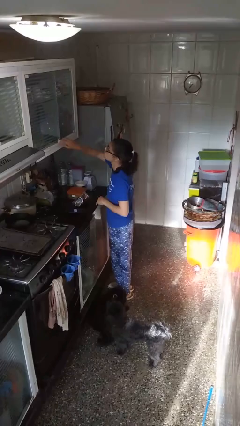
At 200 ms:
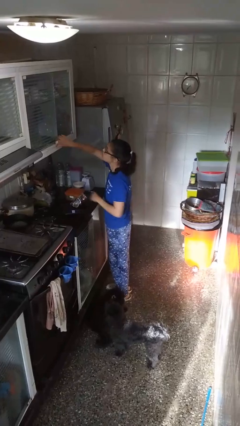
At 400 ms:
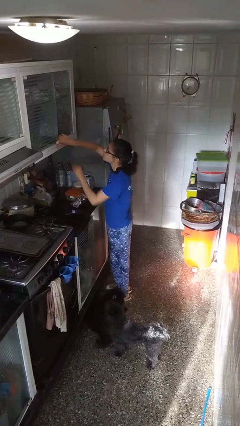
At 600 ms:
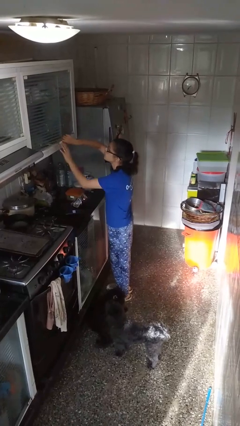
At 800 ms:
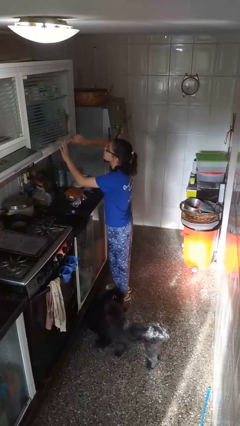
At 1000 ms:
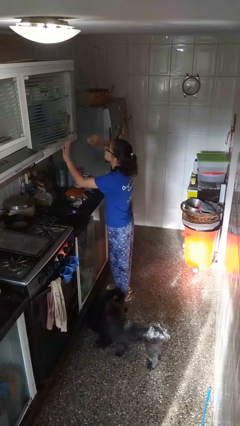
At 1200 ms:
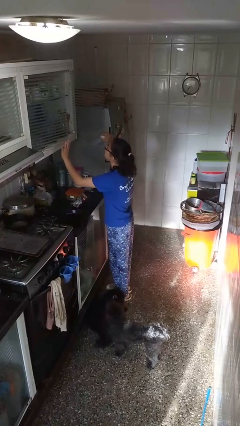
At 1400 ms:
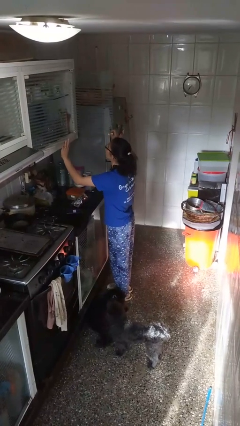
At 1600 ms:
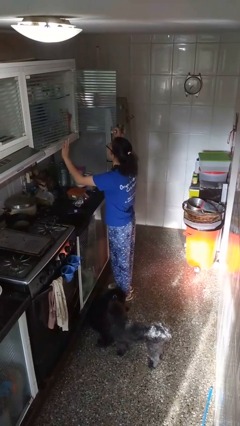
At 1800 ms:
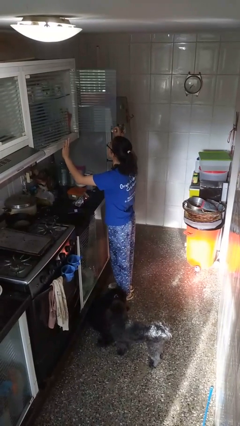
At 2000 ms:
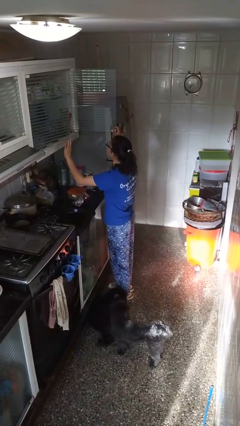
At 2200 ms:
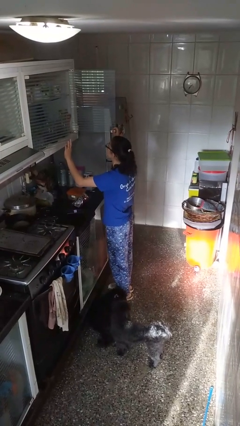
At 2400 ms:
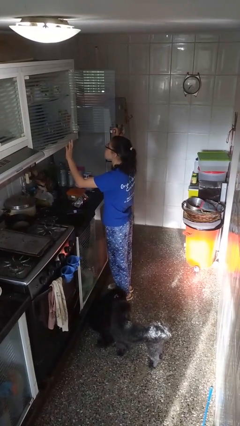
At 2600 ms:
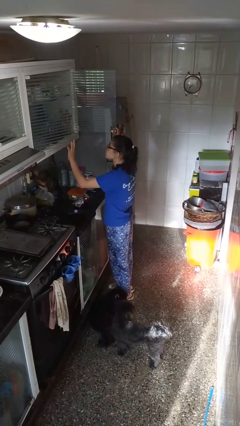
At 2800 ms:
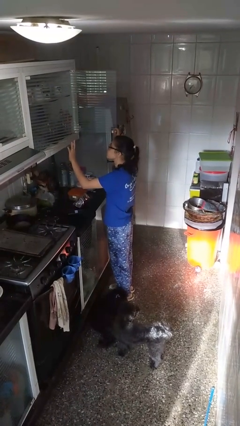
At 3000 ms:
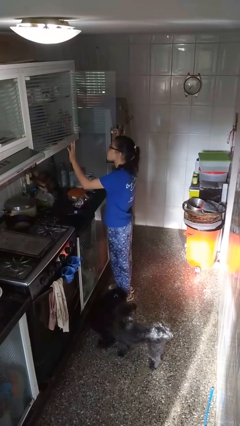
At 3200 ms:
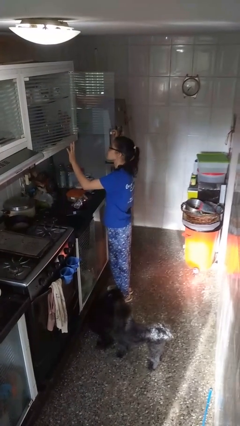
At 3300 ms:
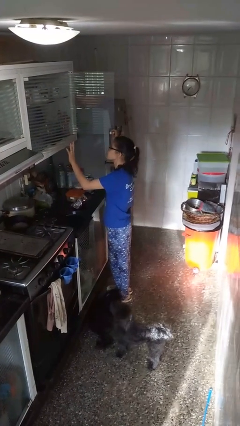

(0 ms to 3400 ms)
person closes cabinet

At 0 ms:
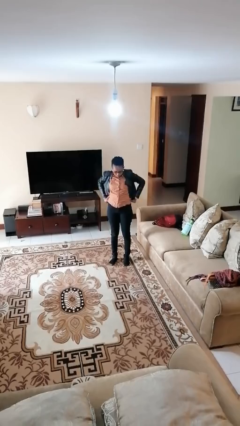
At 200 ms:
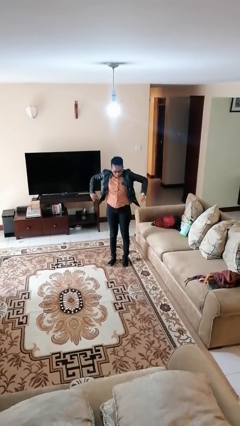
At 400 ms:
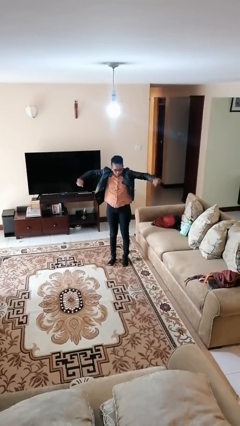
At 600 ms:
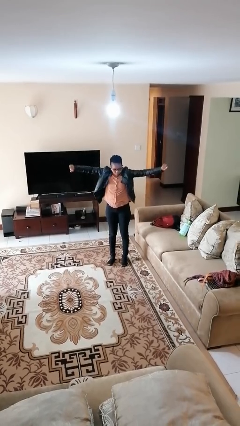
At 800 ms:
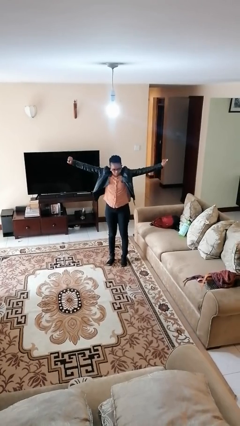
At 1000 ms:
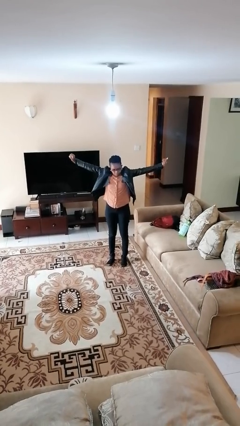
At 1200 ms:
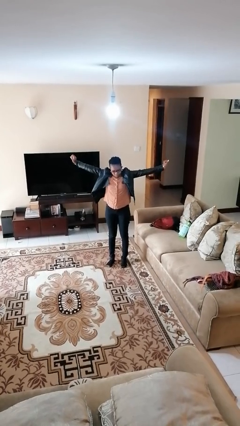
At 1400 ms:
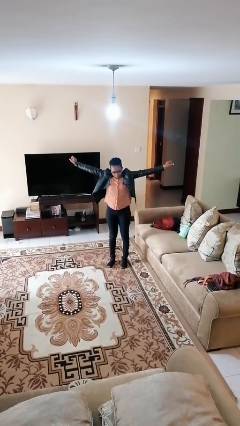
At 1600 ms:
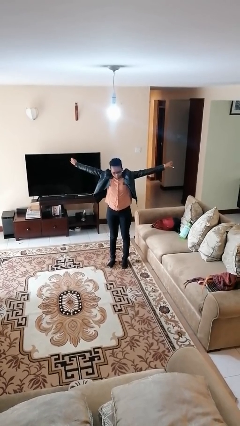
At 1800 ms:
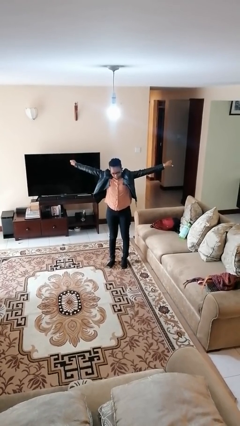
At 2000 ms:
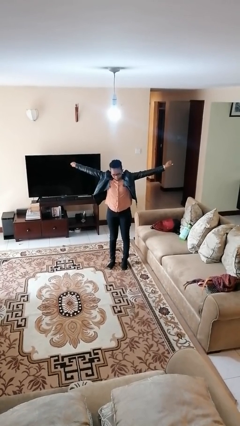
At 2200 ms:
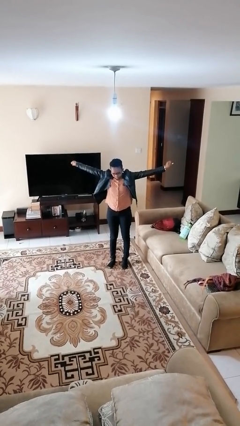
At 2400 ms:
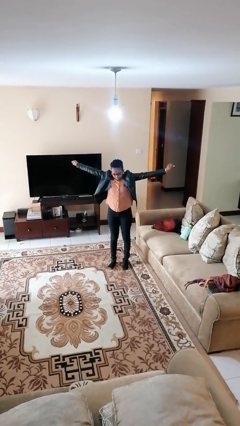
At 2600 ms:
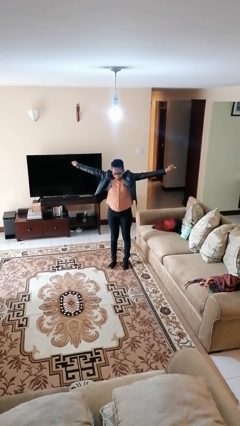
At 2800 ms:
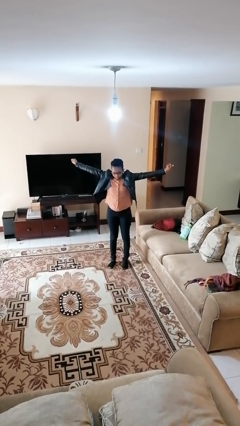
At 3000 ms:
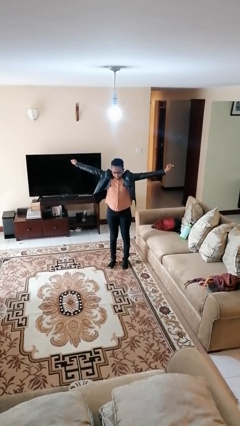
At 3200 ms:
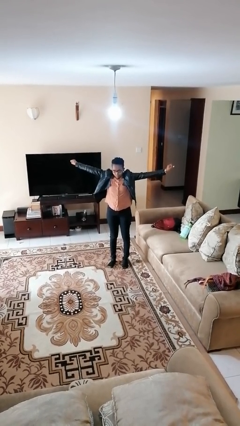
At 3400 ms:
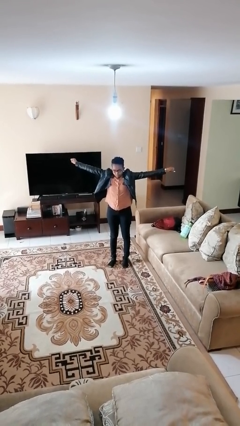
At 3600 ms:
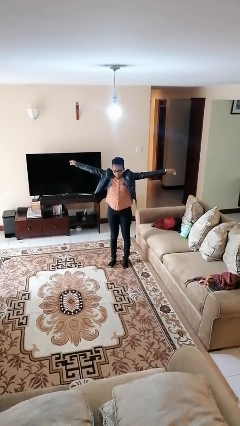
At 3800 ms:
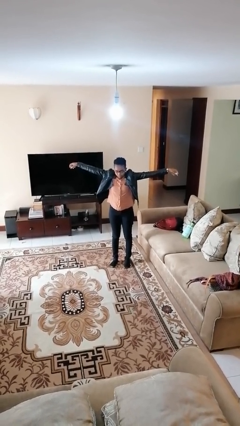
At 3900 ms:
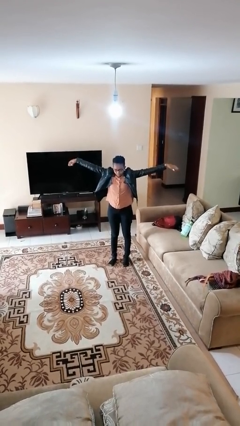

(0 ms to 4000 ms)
person stretches arms to side

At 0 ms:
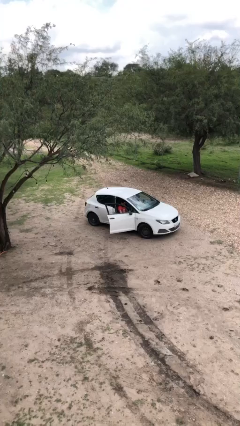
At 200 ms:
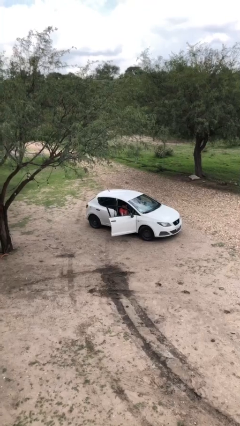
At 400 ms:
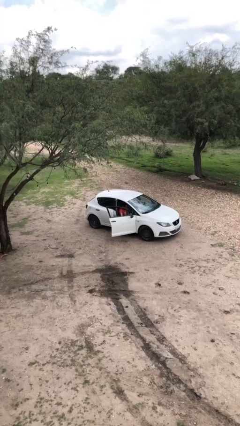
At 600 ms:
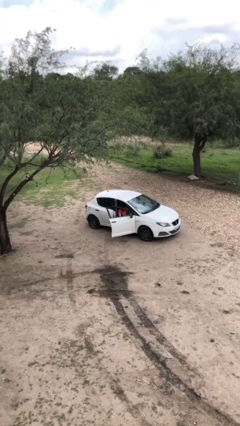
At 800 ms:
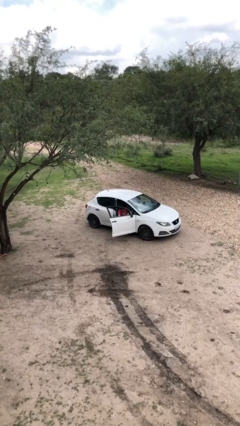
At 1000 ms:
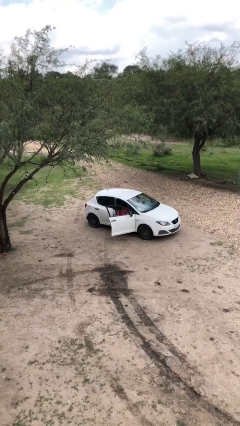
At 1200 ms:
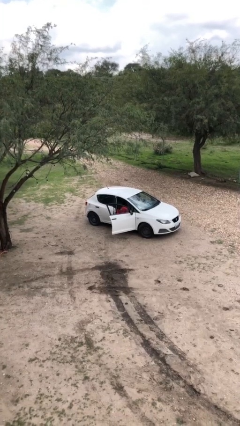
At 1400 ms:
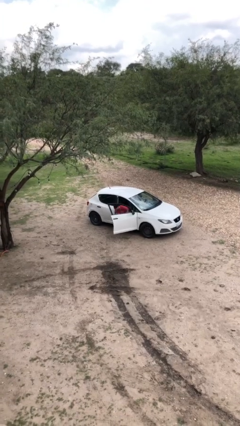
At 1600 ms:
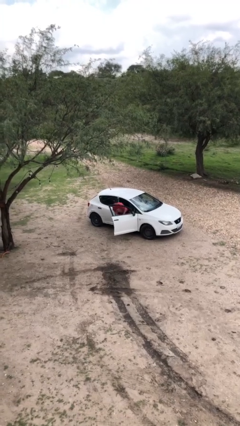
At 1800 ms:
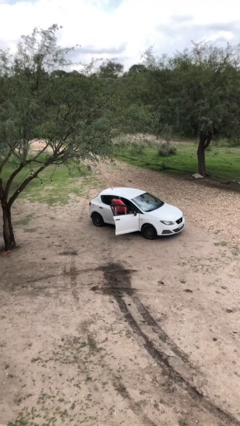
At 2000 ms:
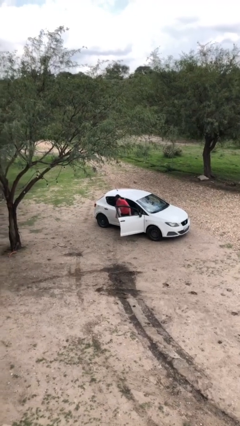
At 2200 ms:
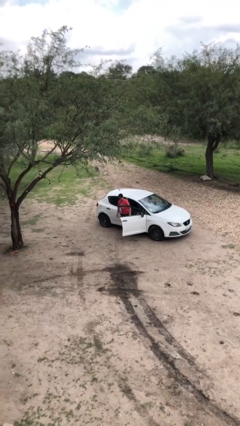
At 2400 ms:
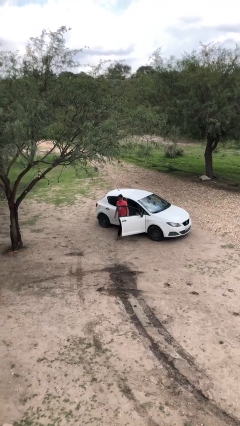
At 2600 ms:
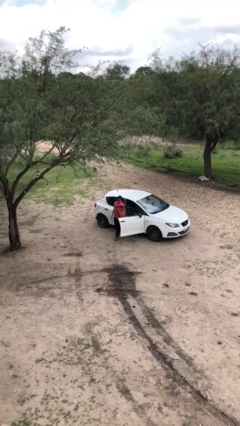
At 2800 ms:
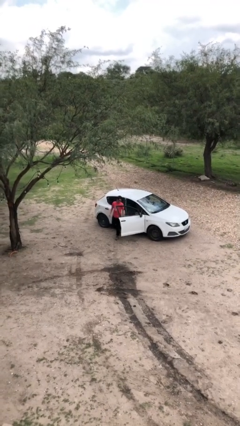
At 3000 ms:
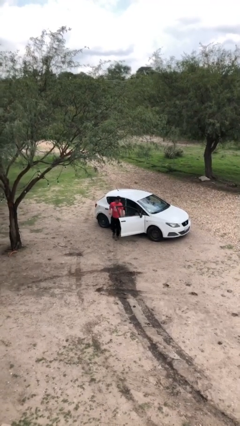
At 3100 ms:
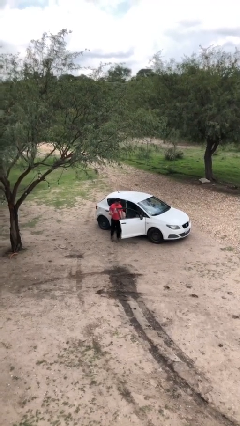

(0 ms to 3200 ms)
person exits car

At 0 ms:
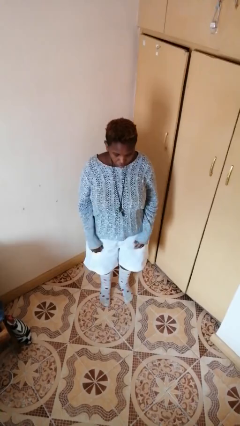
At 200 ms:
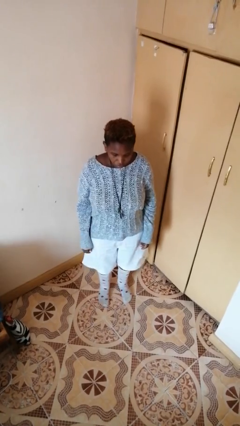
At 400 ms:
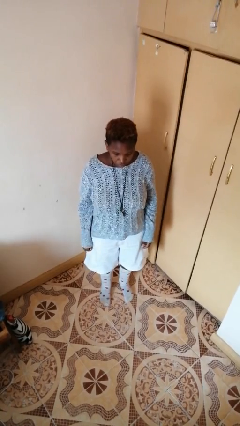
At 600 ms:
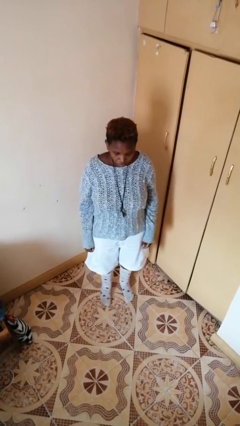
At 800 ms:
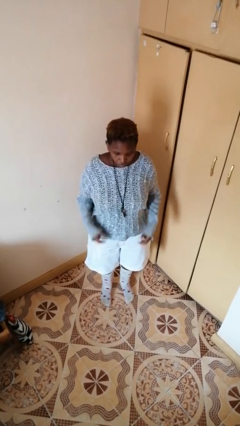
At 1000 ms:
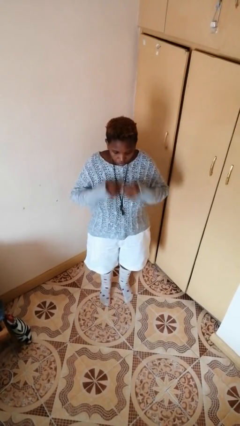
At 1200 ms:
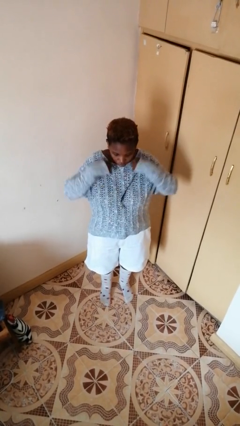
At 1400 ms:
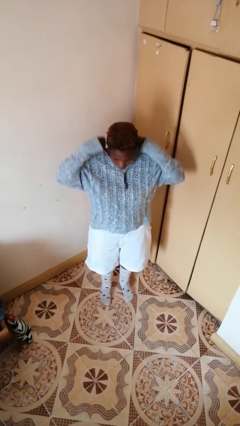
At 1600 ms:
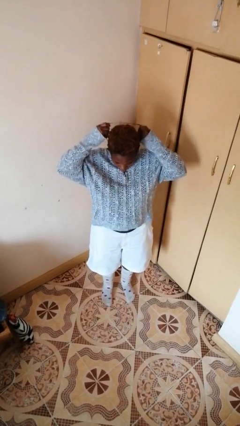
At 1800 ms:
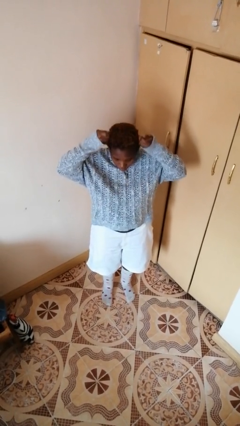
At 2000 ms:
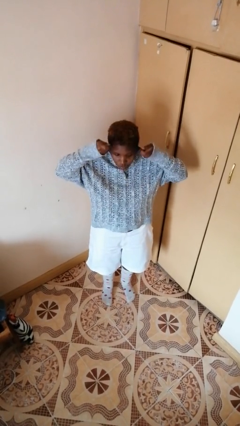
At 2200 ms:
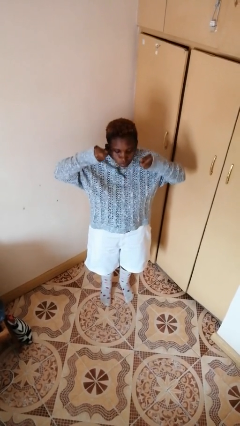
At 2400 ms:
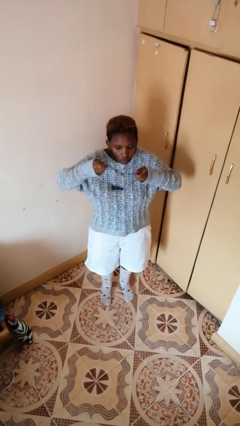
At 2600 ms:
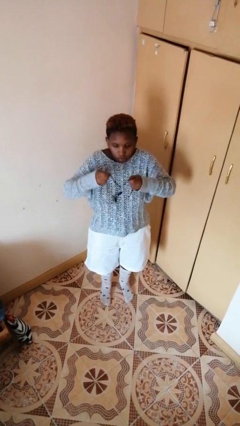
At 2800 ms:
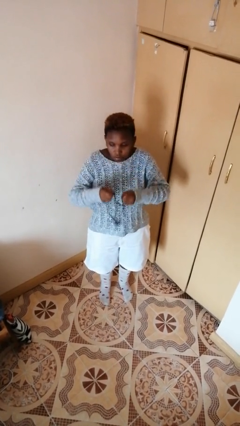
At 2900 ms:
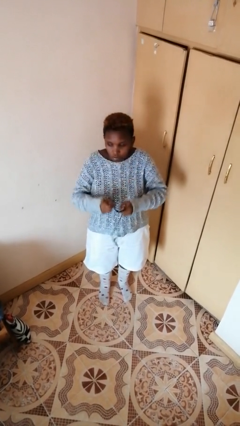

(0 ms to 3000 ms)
person takes off necklace

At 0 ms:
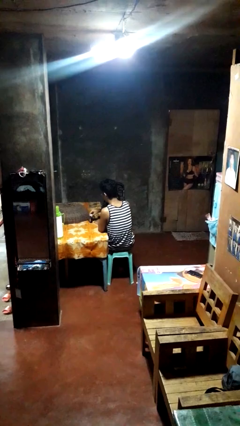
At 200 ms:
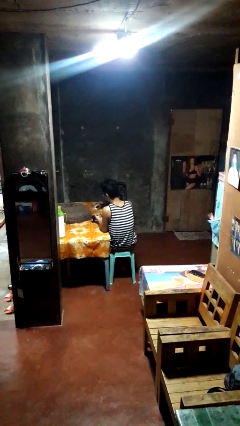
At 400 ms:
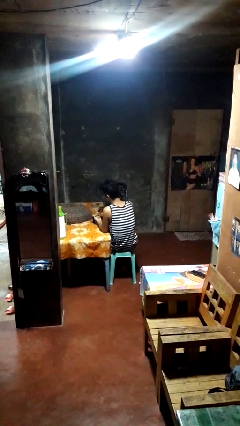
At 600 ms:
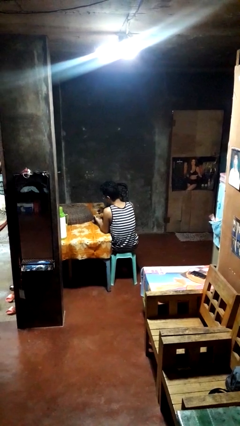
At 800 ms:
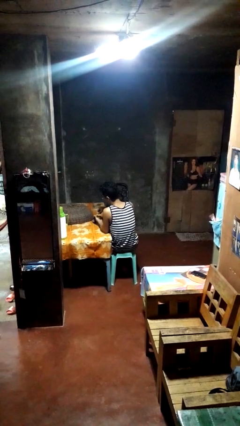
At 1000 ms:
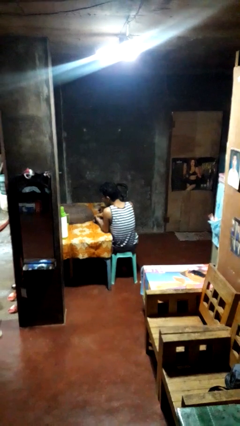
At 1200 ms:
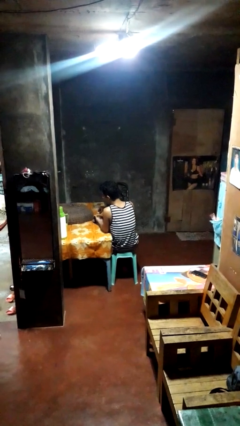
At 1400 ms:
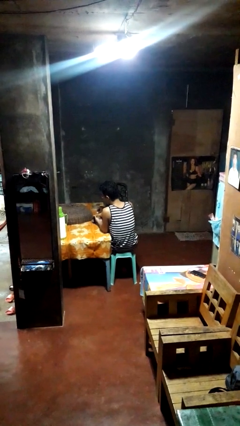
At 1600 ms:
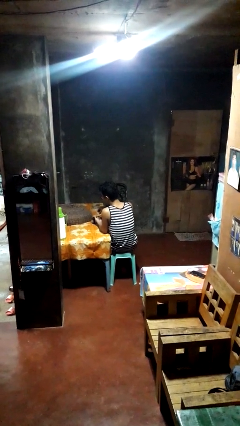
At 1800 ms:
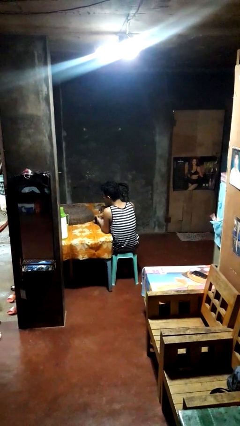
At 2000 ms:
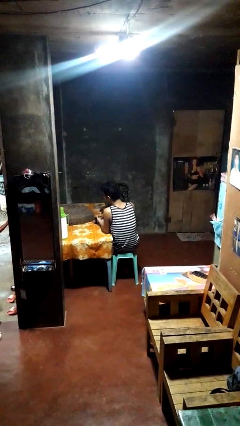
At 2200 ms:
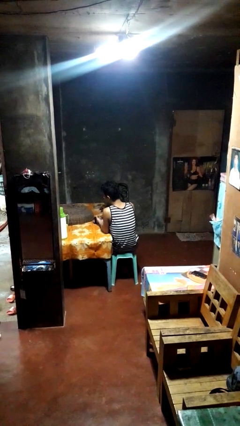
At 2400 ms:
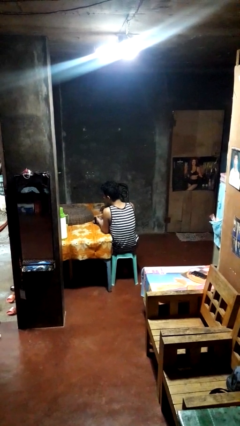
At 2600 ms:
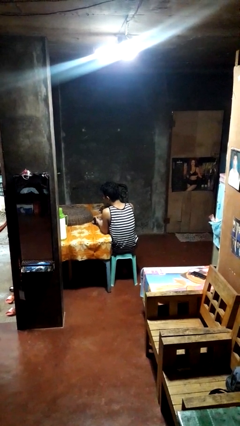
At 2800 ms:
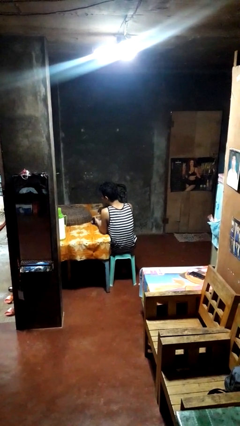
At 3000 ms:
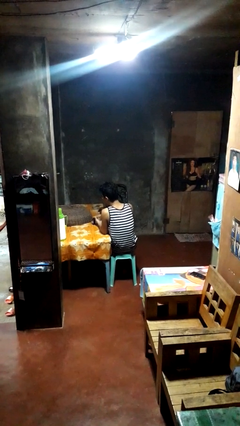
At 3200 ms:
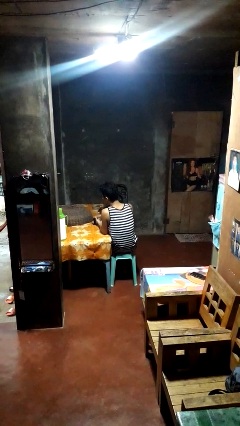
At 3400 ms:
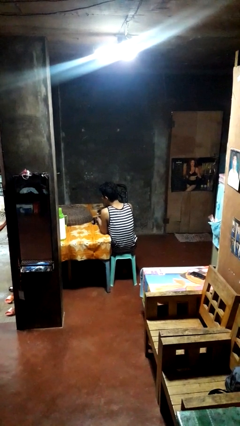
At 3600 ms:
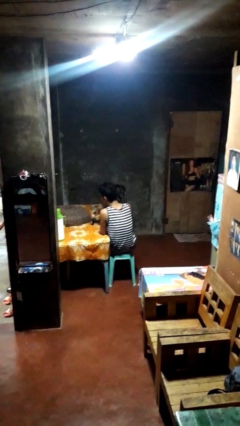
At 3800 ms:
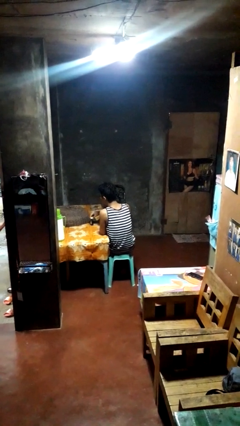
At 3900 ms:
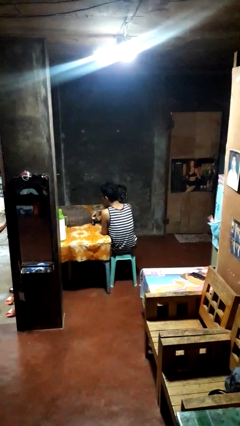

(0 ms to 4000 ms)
person paints fingernails
